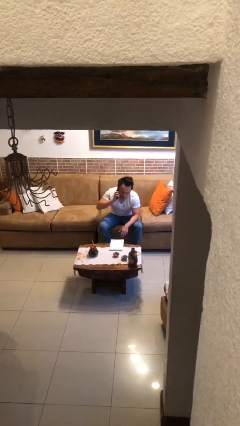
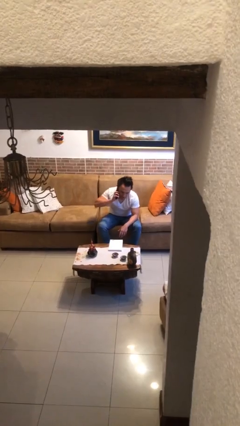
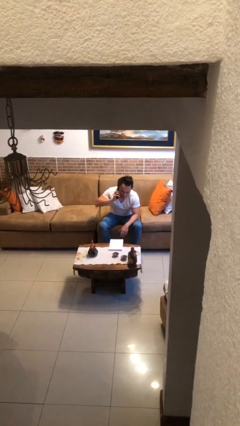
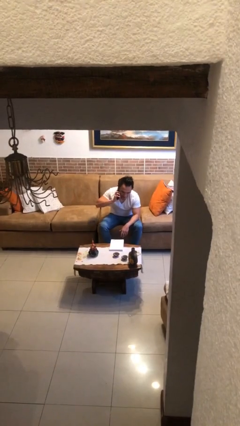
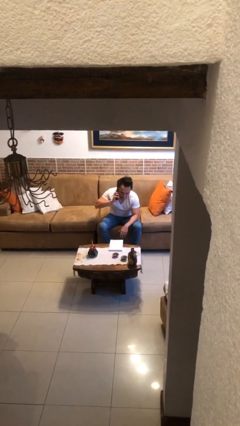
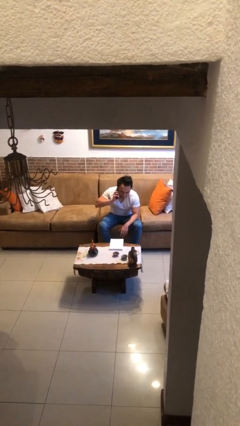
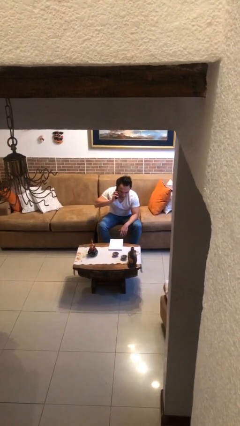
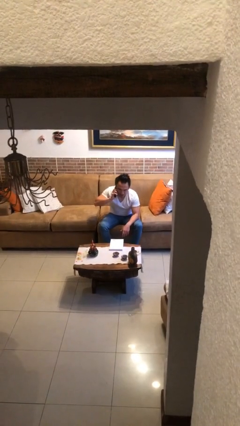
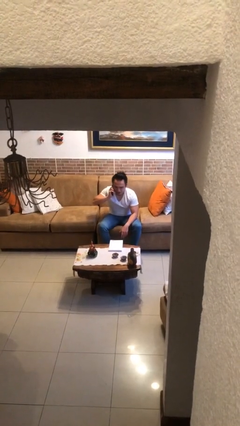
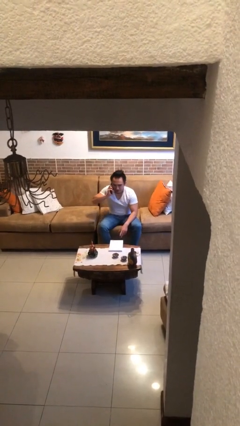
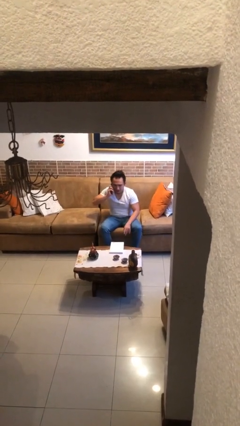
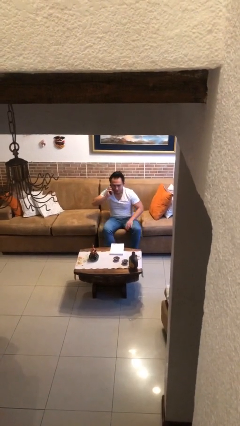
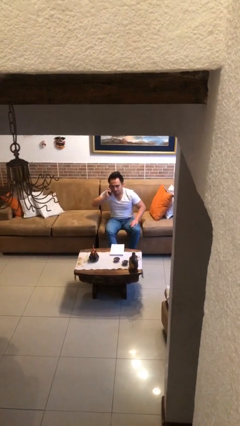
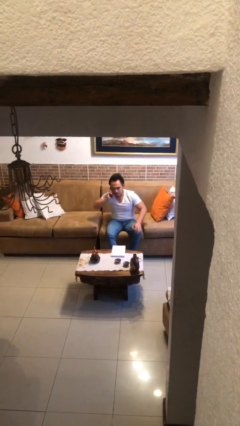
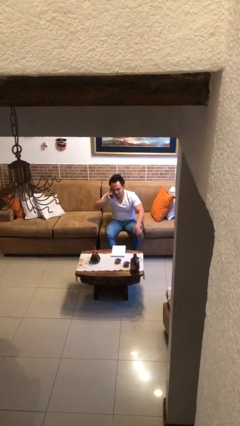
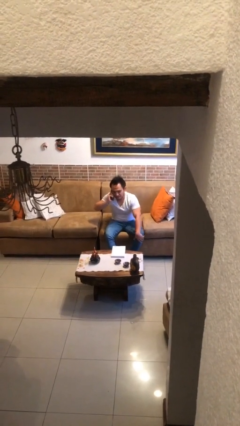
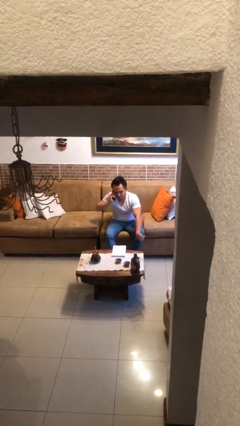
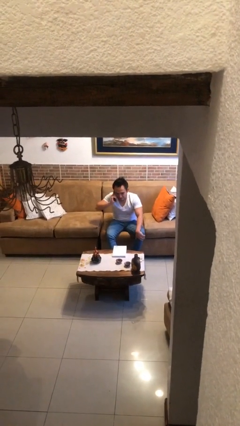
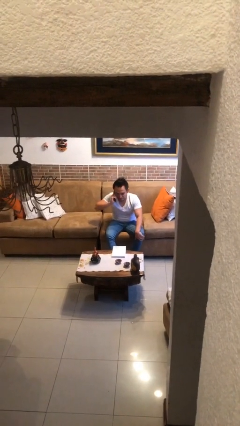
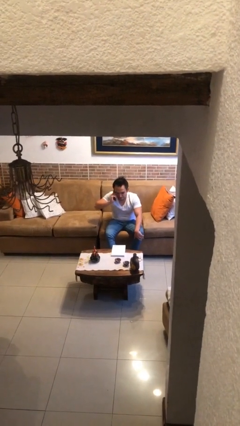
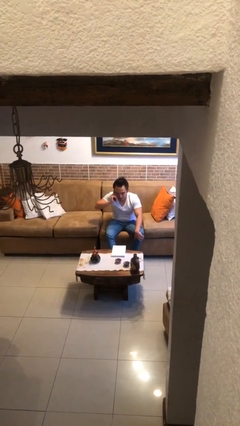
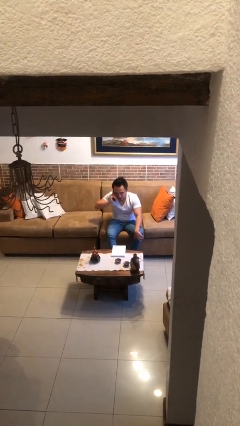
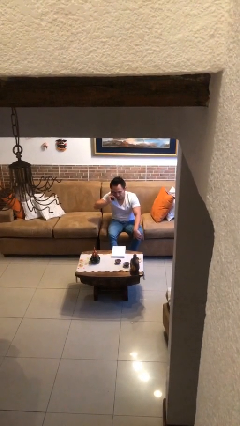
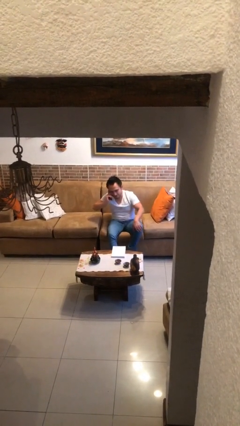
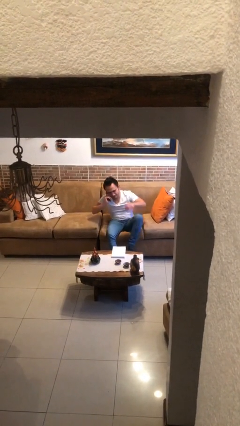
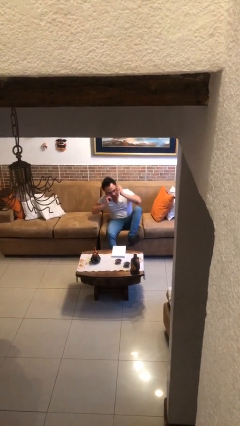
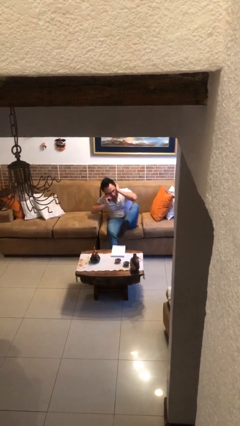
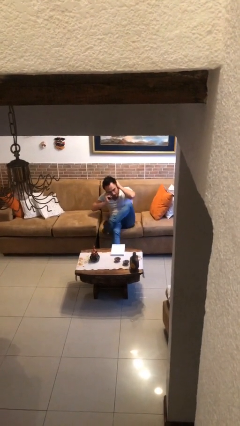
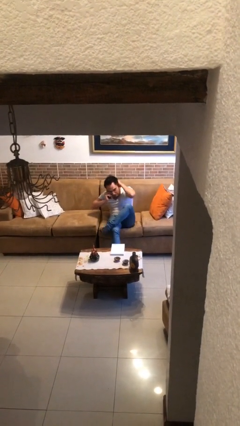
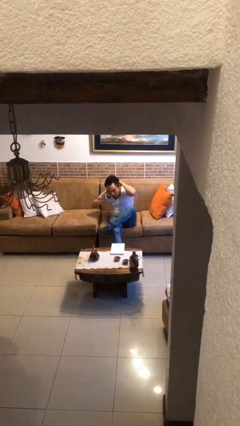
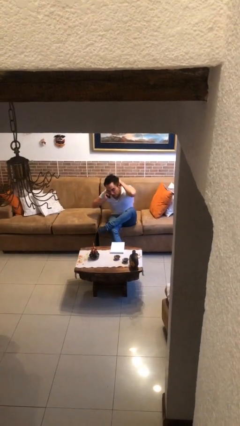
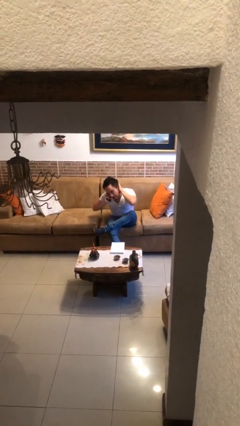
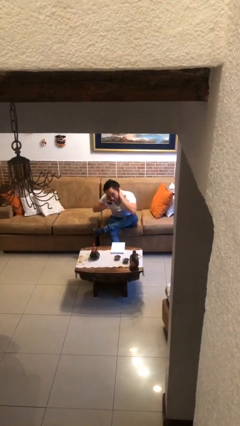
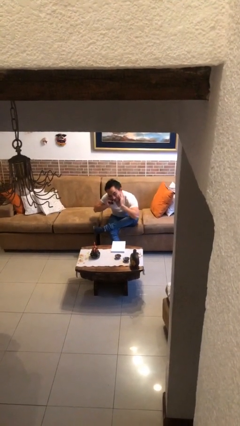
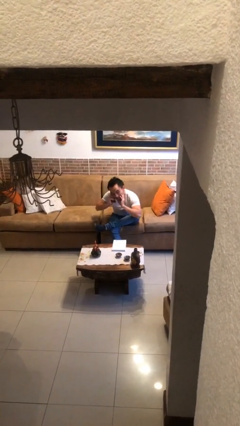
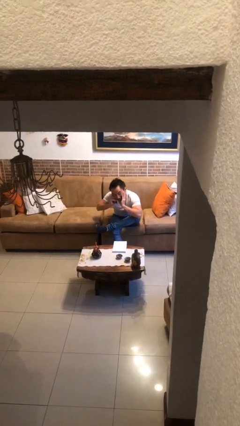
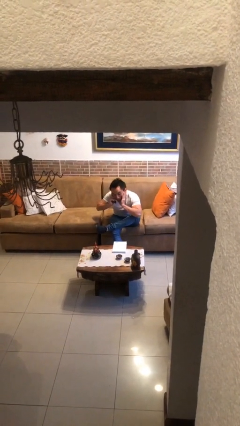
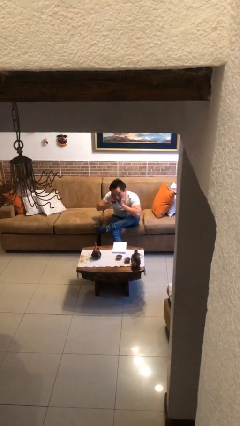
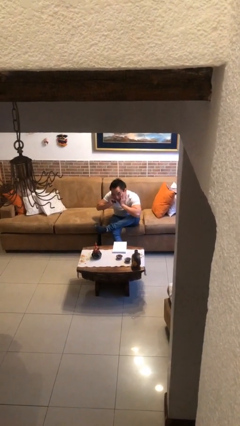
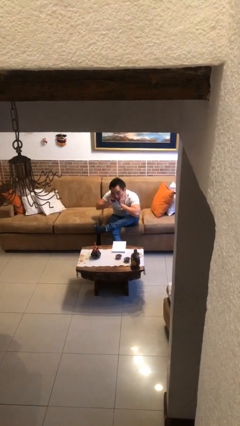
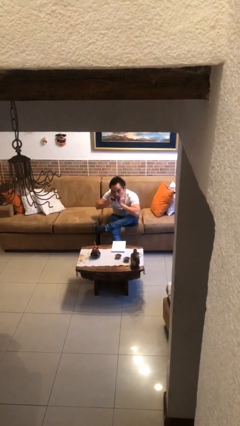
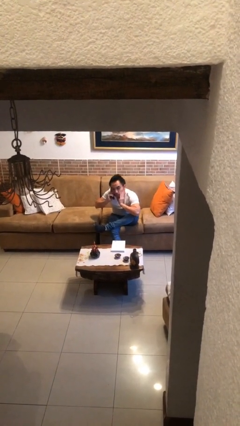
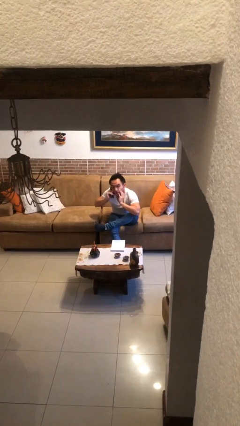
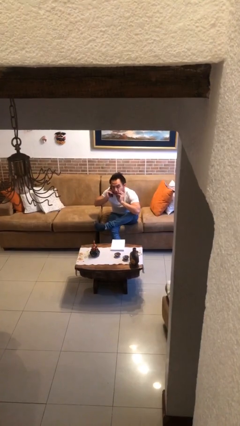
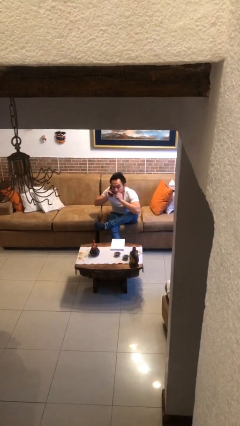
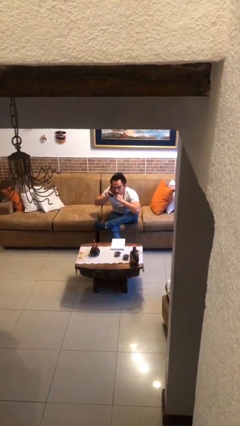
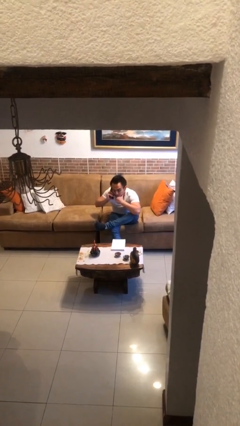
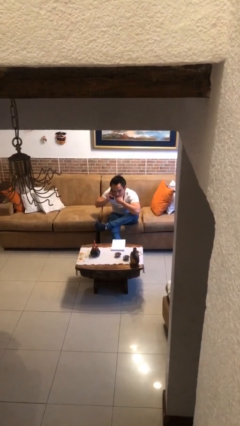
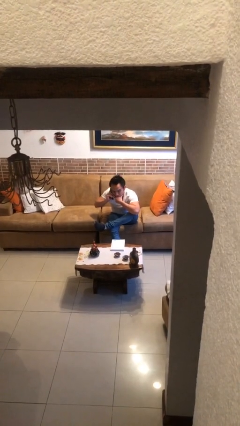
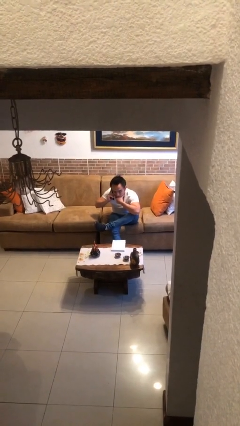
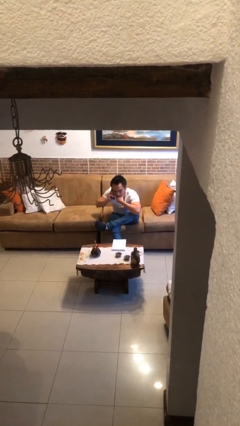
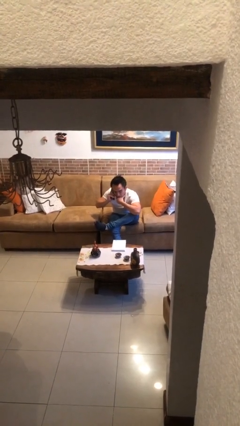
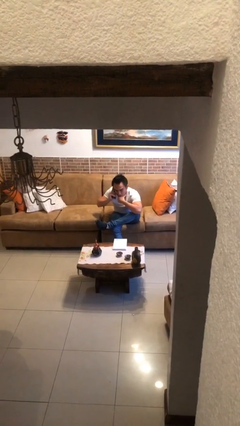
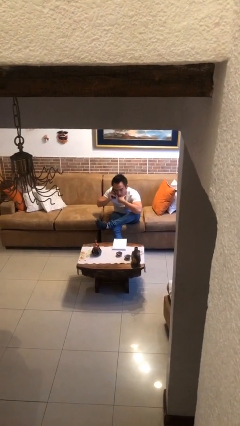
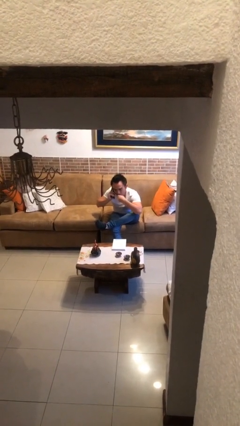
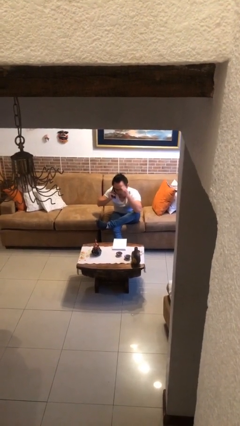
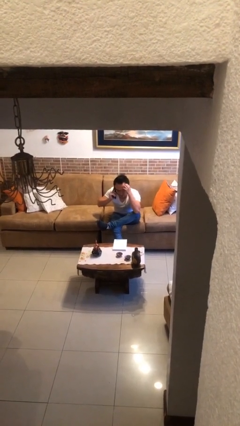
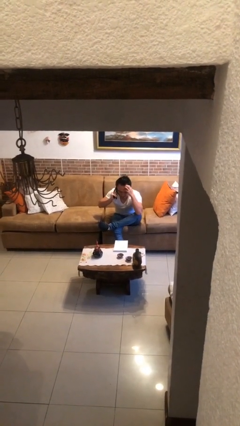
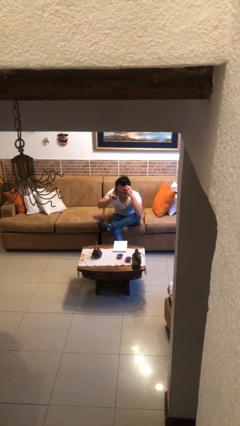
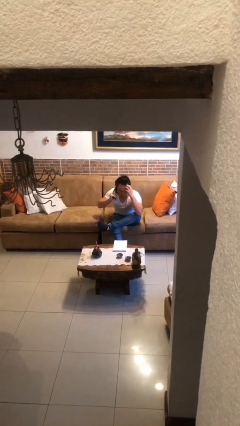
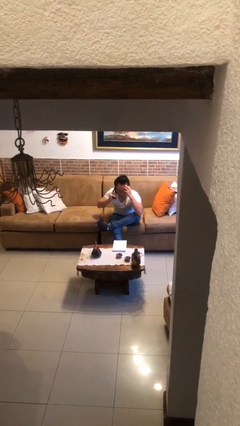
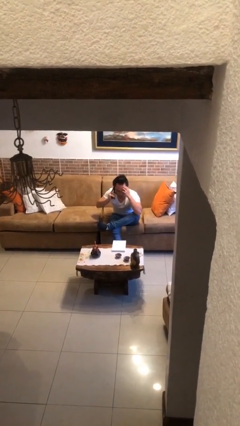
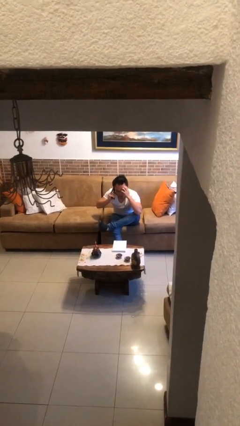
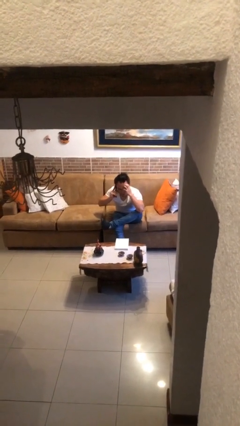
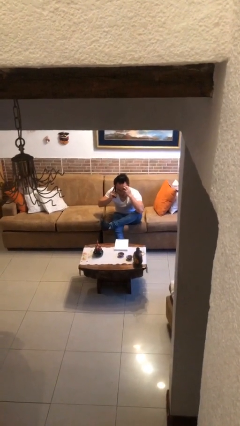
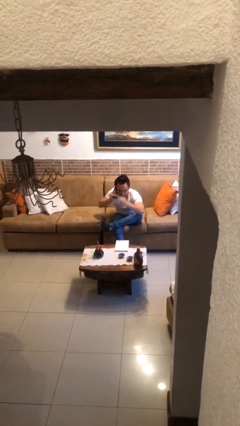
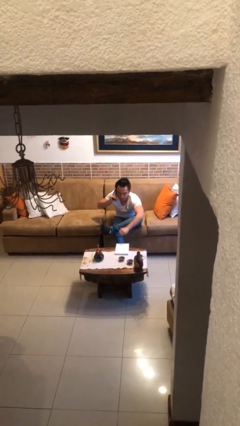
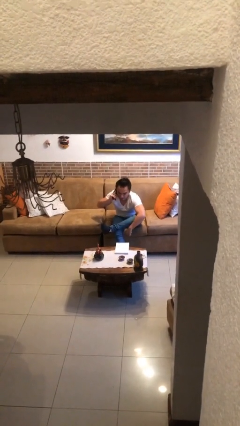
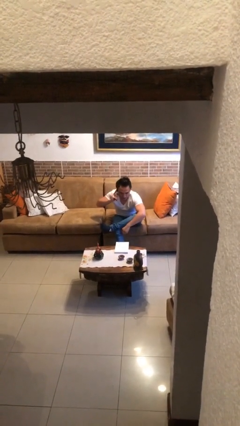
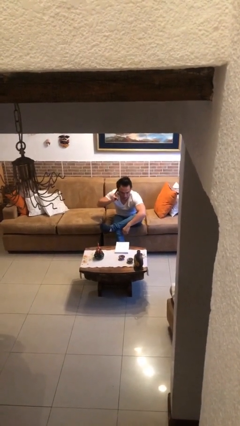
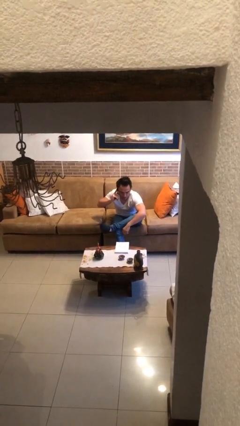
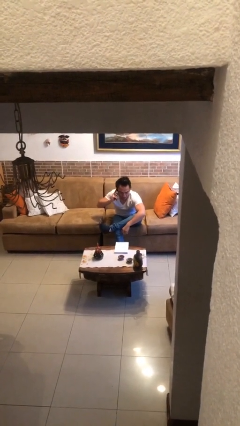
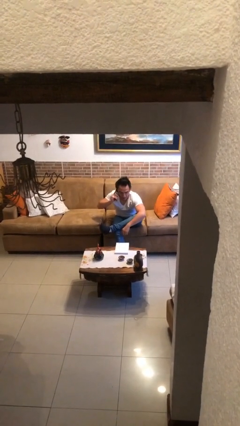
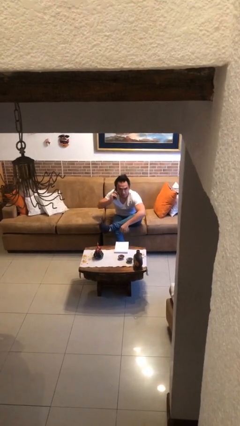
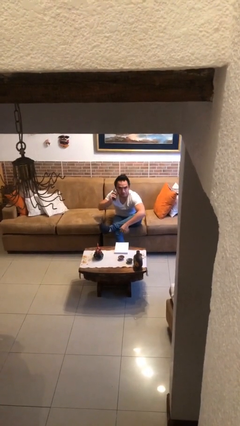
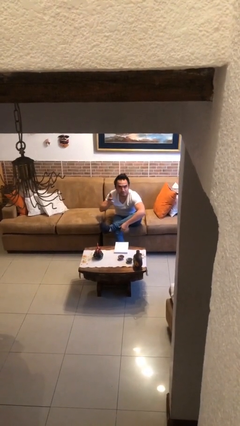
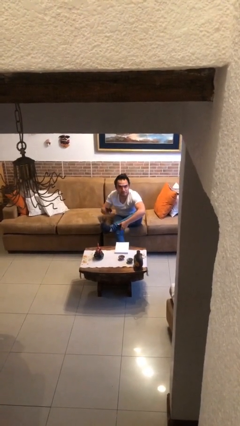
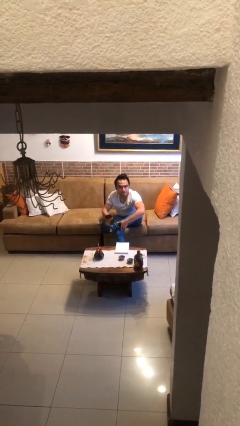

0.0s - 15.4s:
person talks on phone

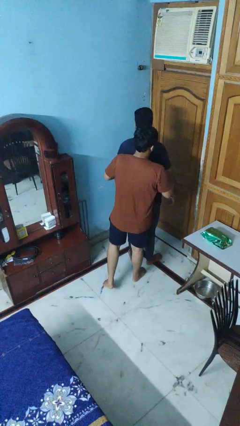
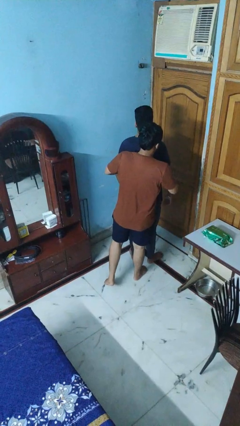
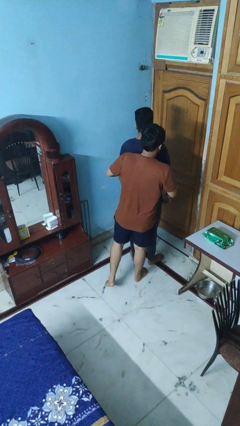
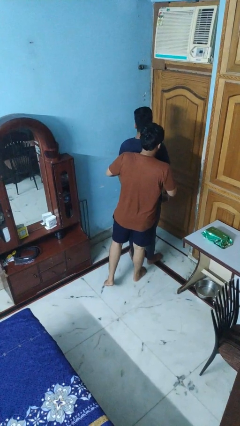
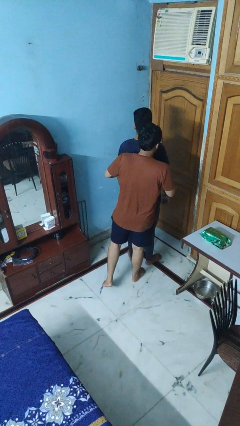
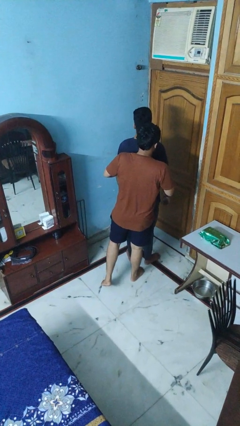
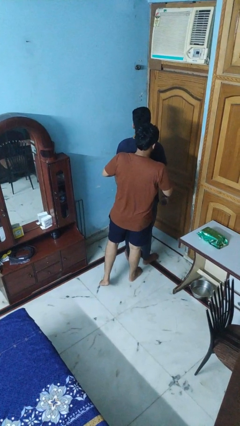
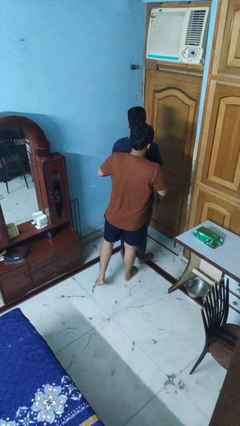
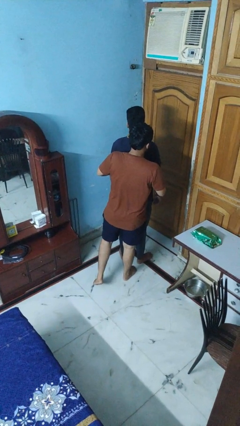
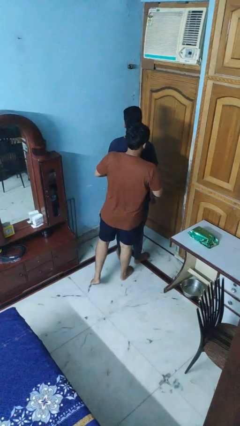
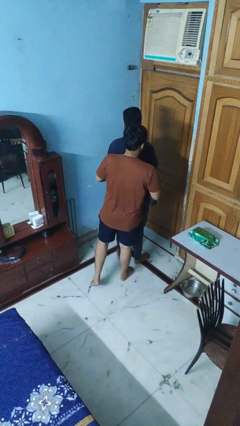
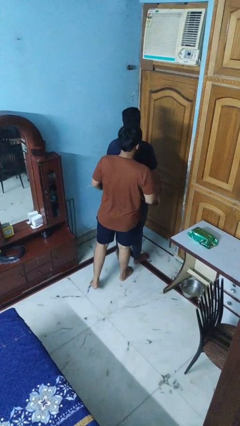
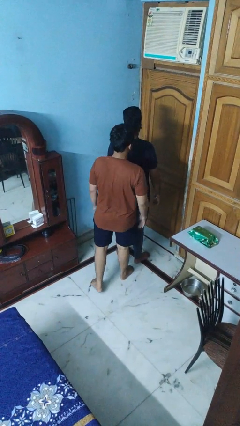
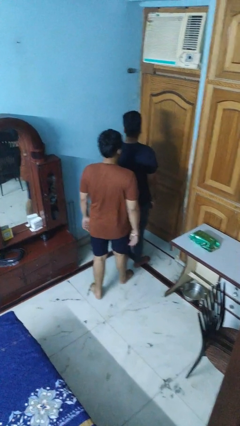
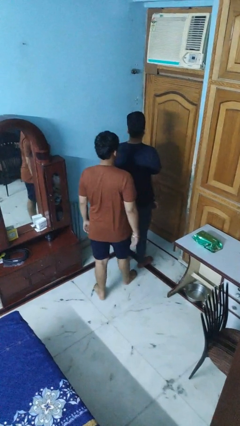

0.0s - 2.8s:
person hugs person from behind
